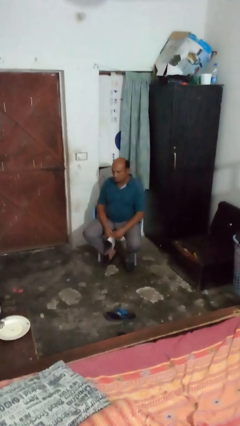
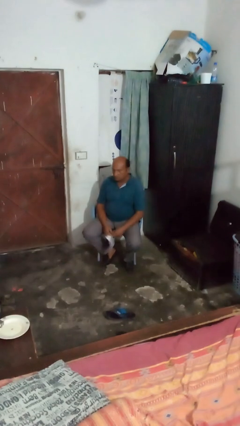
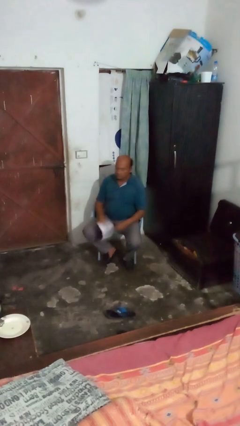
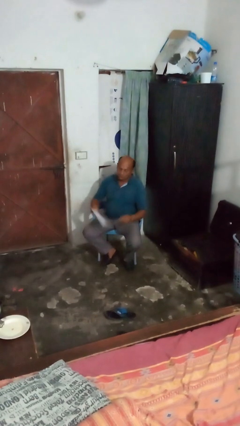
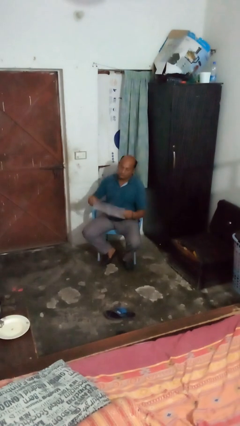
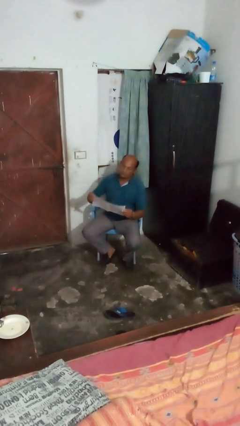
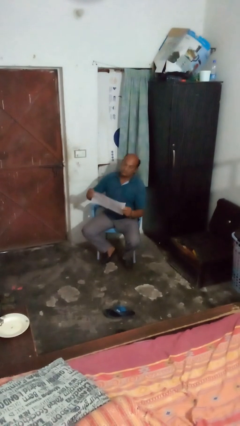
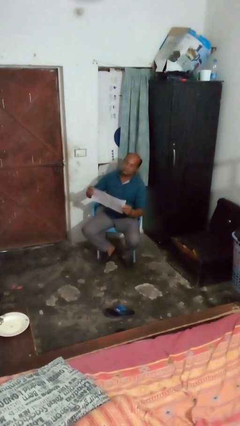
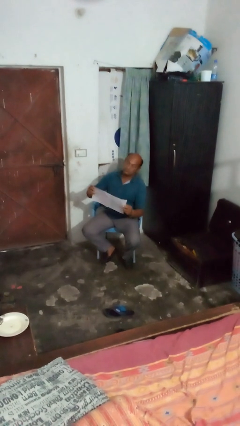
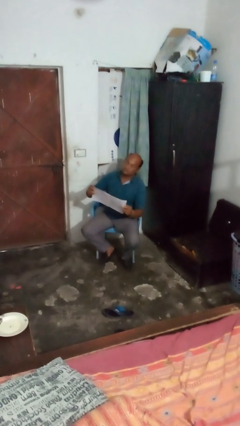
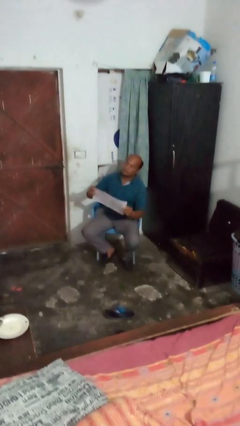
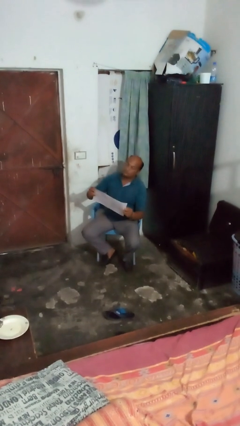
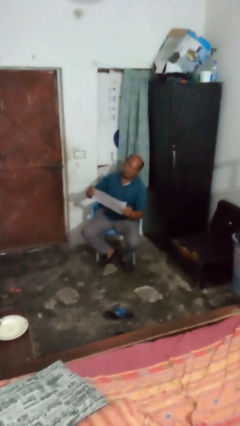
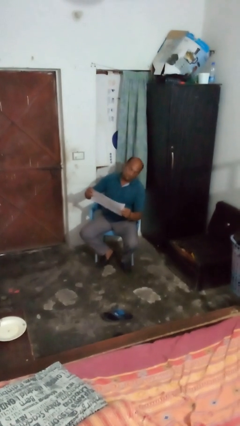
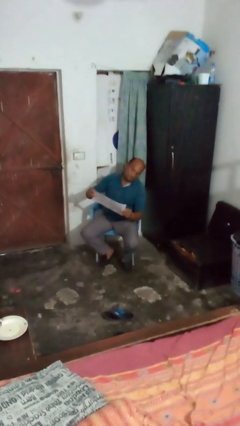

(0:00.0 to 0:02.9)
person reads newspaper

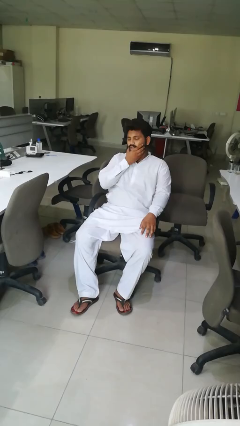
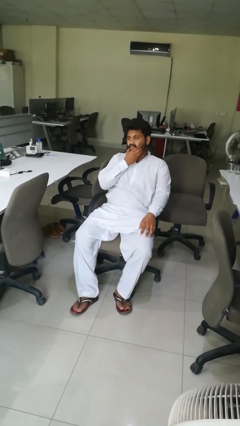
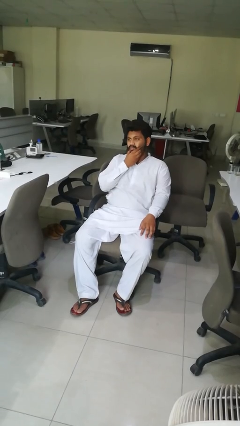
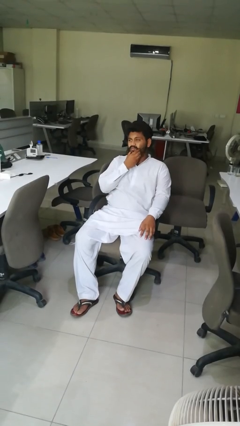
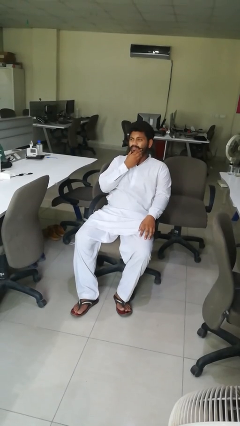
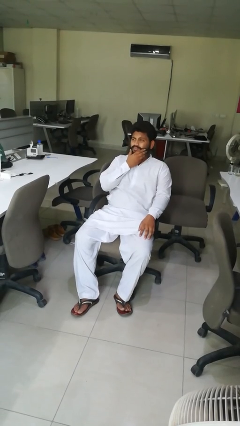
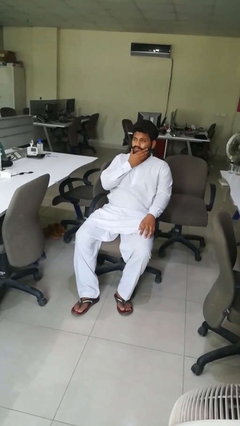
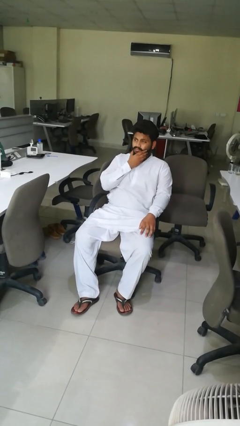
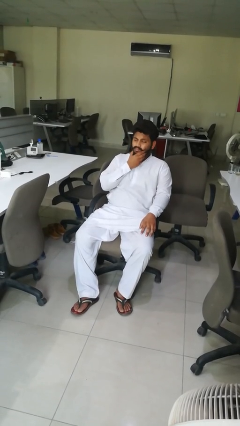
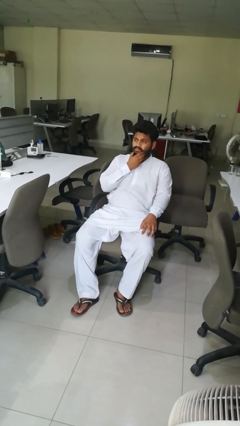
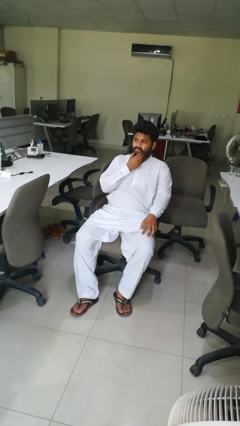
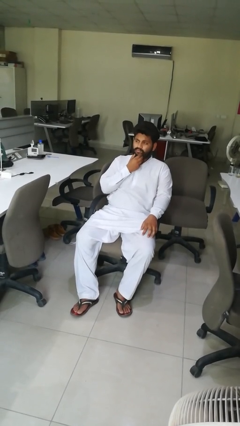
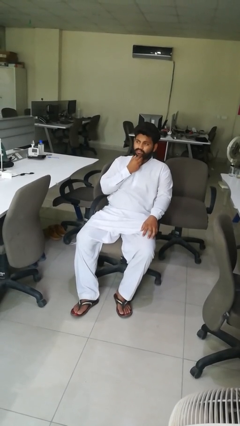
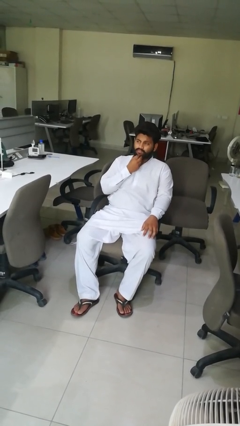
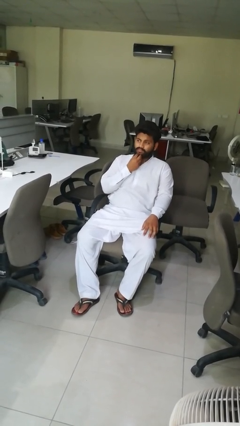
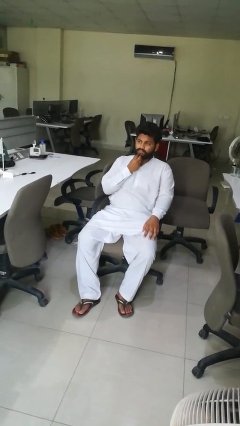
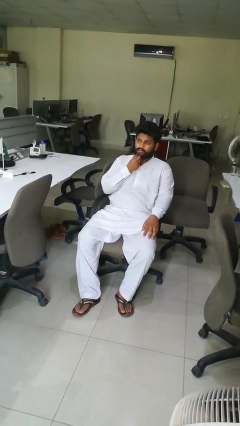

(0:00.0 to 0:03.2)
person strokes chin

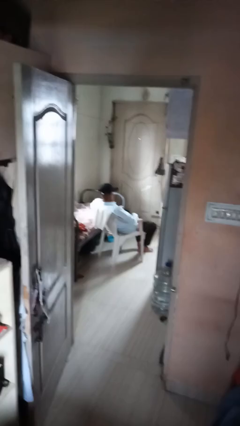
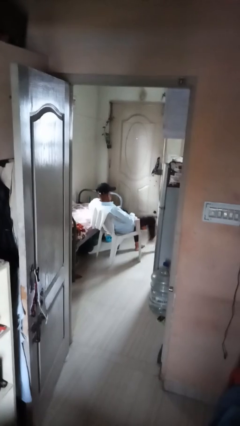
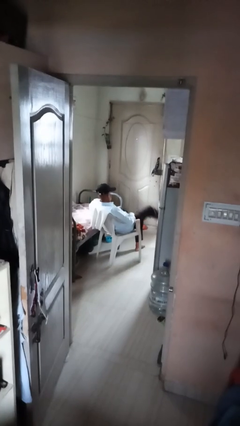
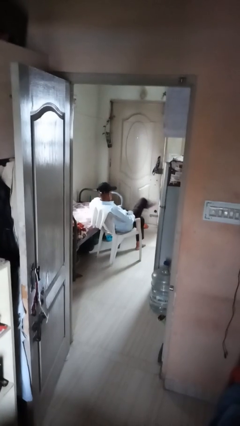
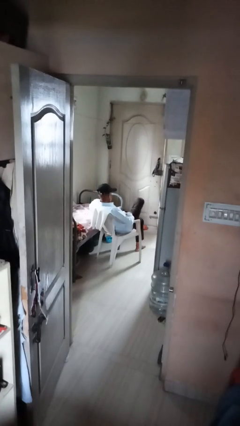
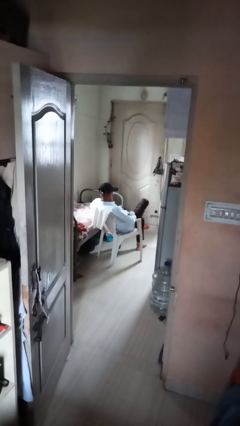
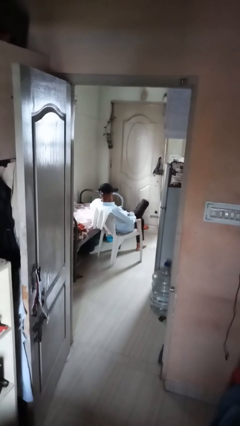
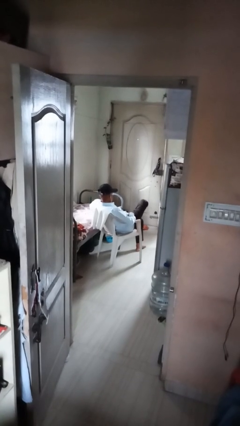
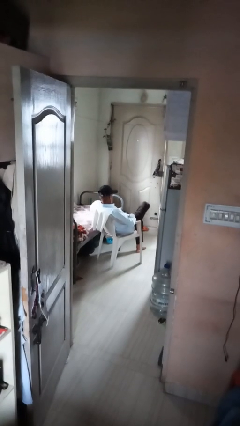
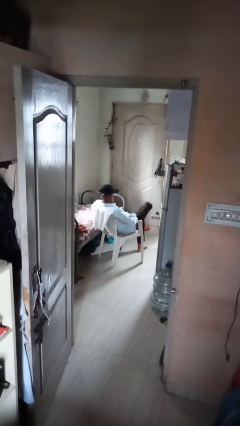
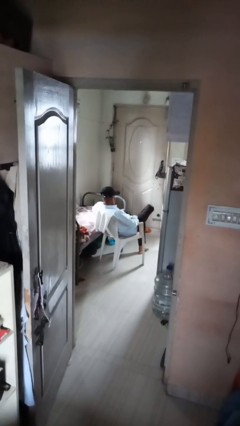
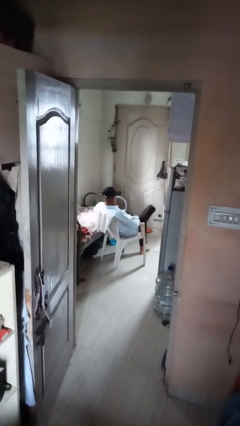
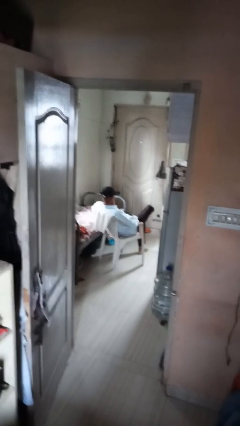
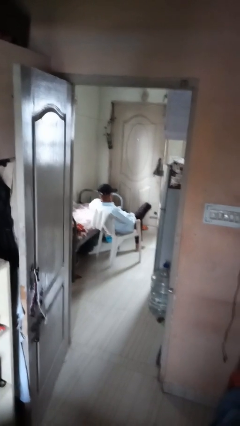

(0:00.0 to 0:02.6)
person crosses legs

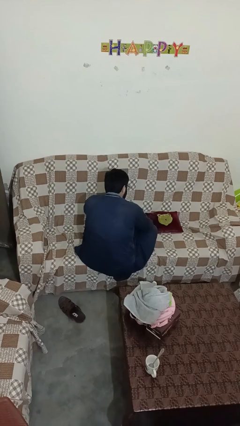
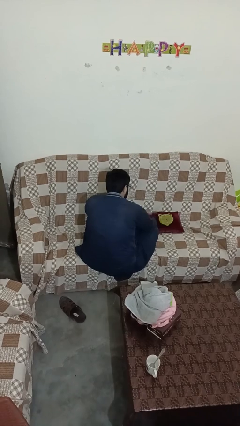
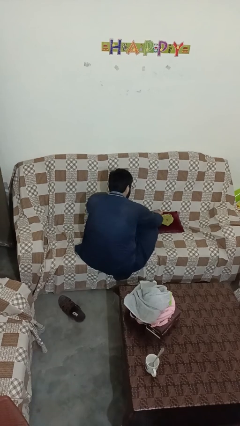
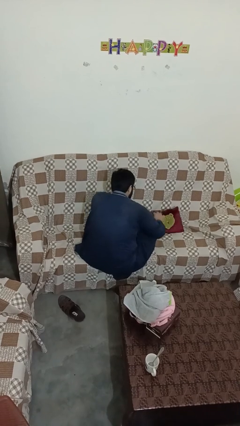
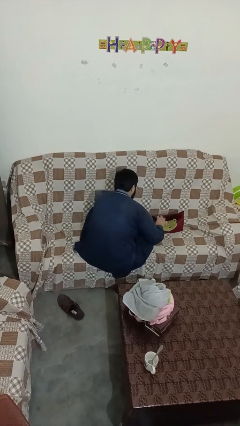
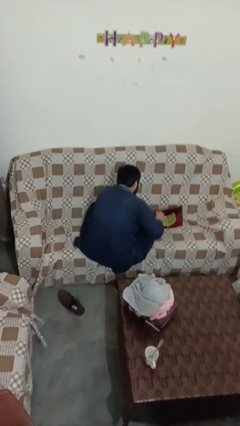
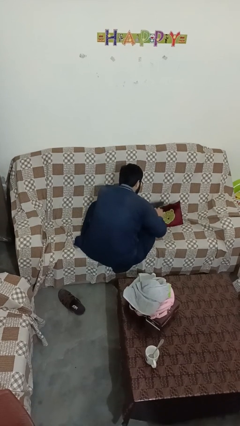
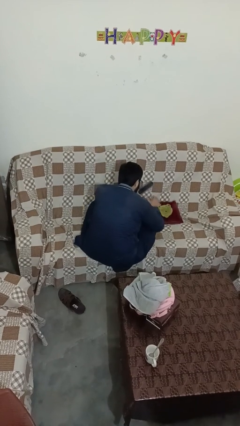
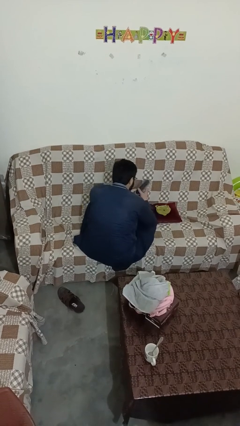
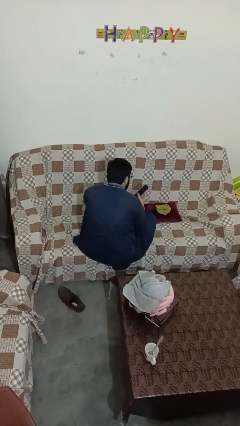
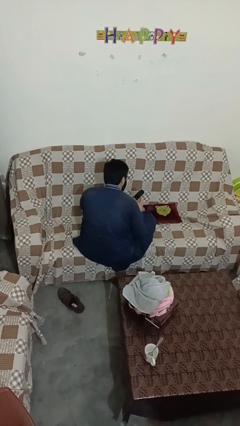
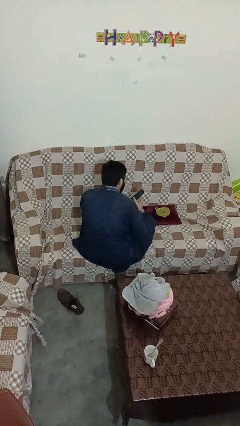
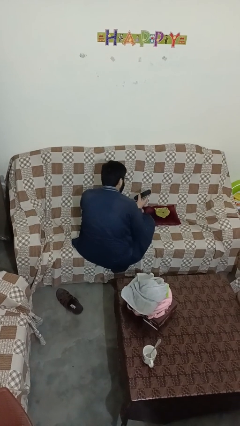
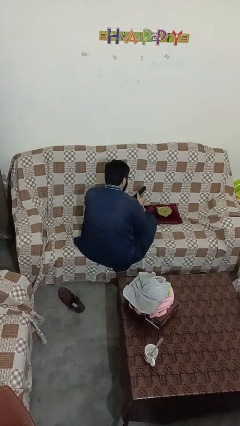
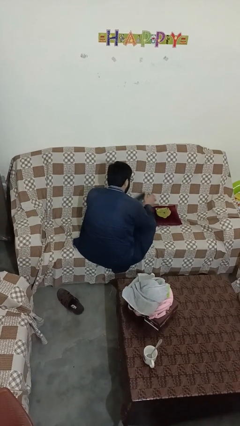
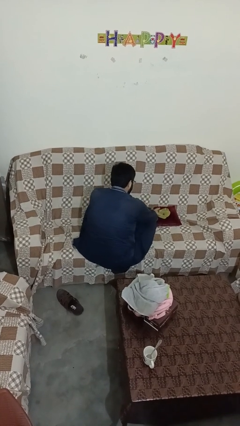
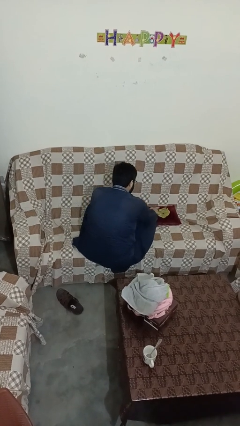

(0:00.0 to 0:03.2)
person searches in couch

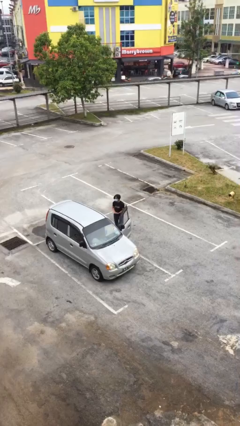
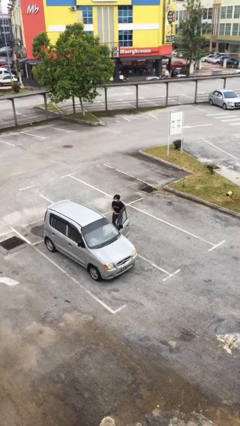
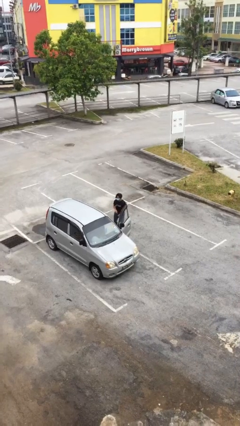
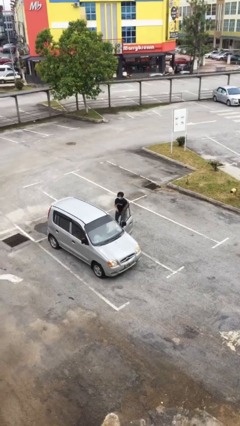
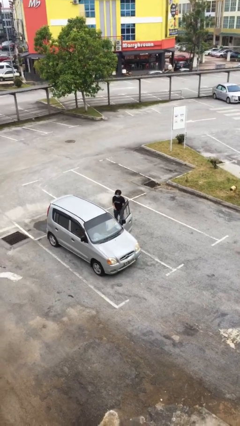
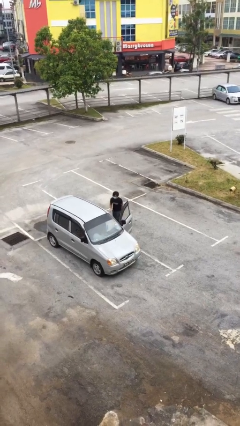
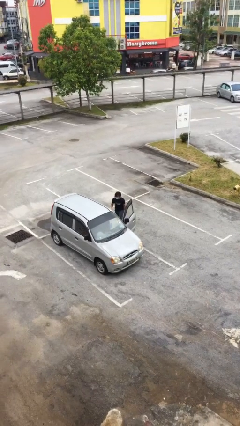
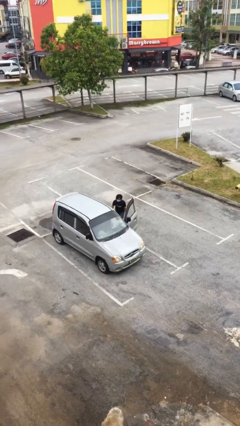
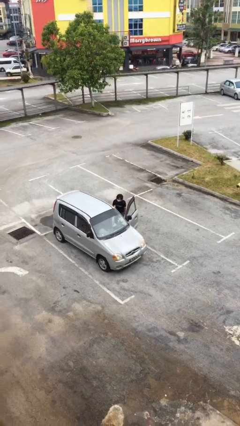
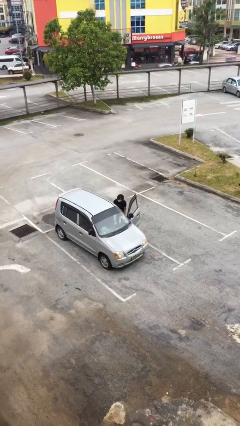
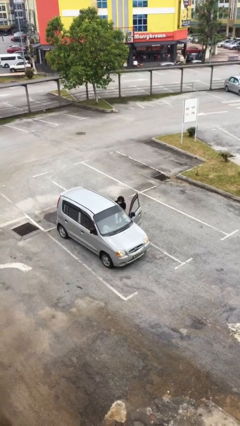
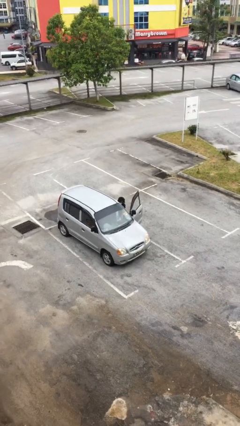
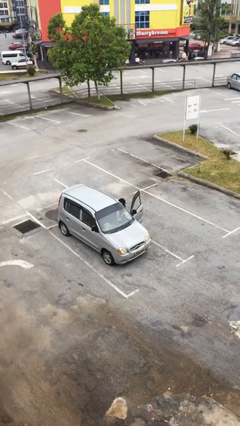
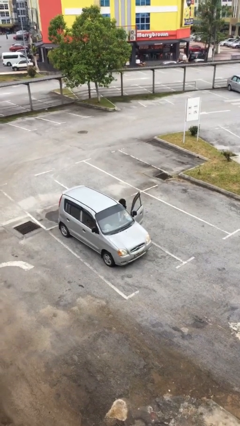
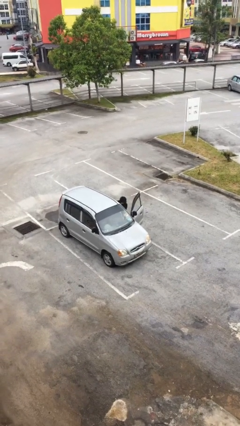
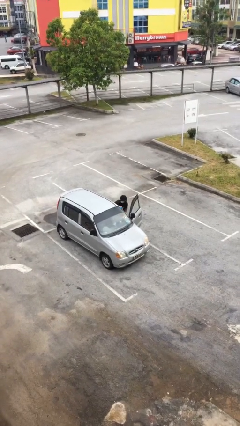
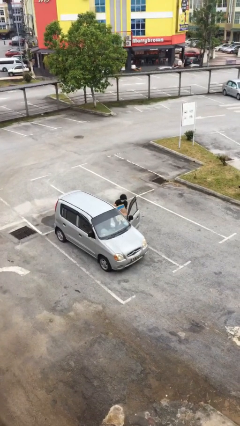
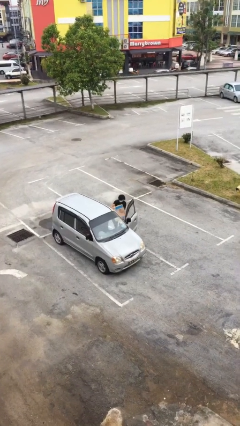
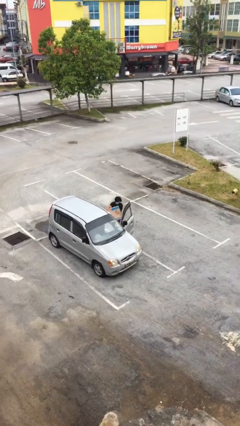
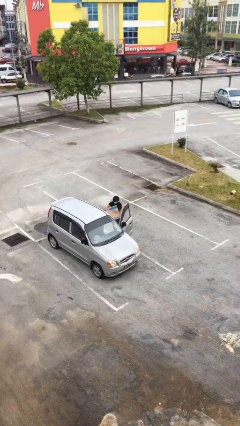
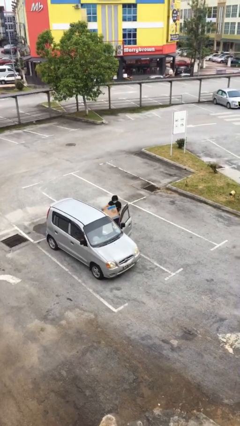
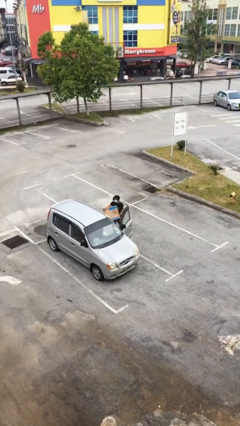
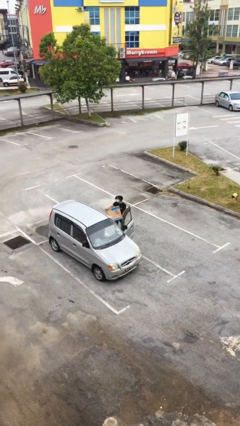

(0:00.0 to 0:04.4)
person unloads car

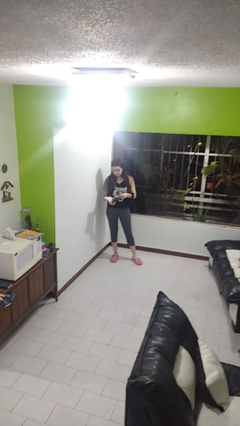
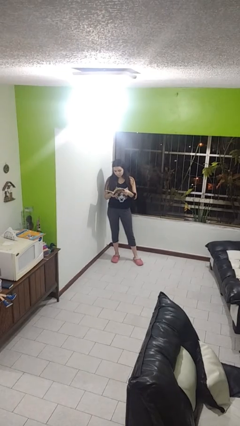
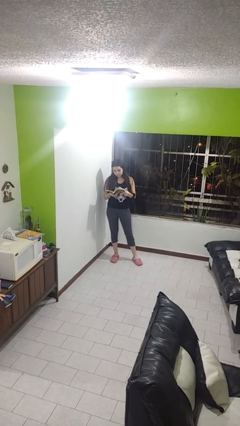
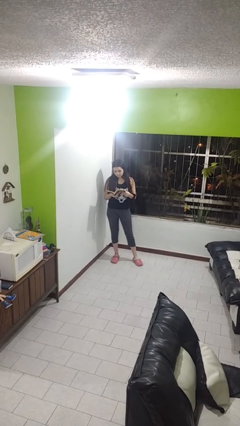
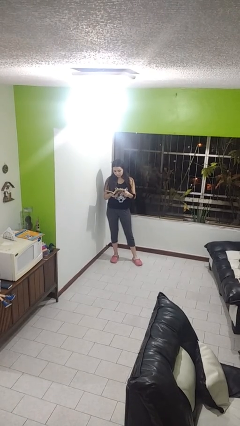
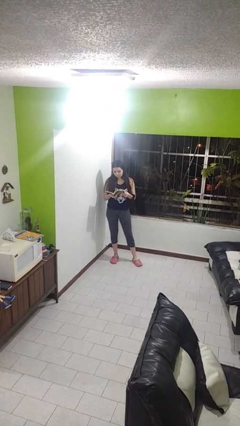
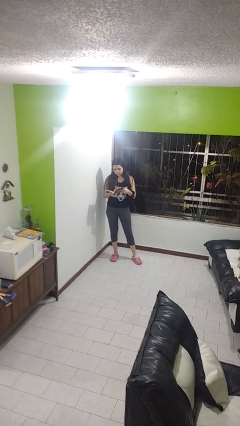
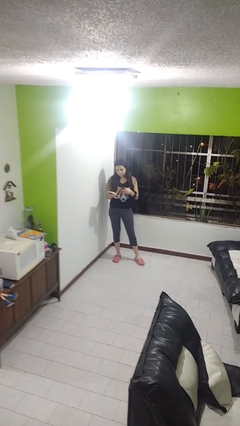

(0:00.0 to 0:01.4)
person reads book
